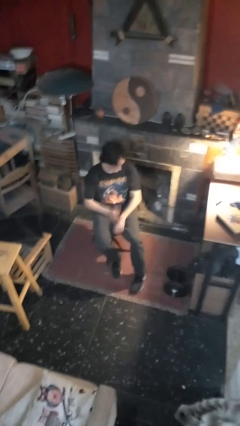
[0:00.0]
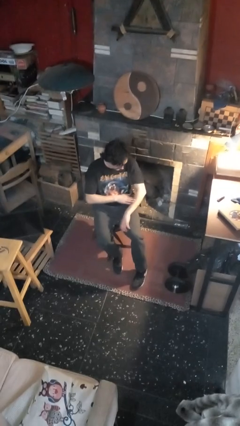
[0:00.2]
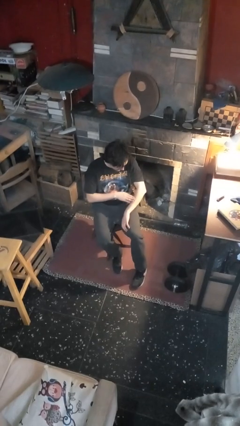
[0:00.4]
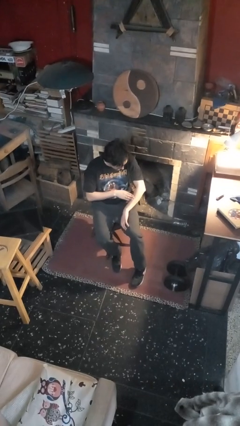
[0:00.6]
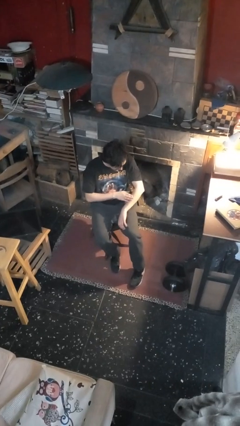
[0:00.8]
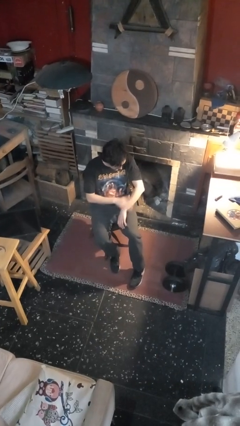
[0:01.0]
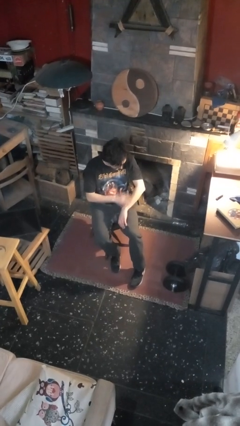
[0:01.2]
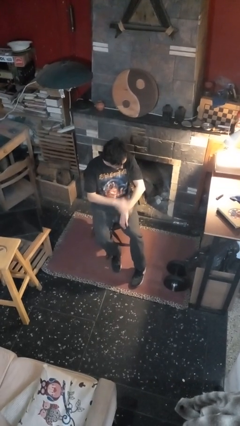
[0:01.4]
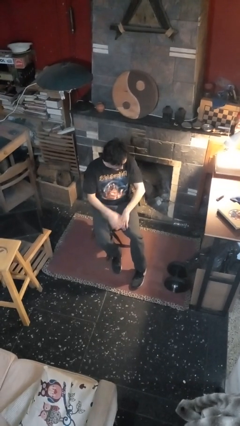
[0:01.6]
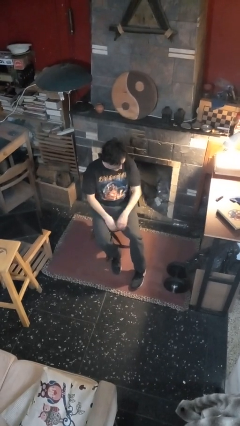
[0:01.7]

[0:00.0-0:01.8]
person swats bug

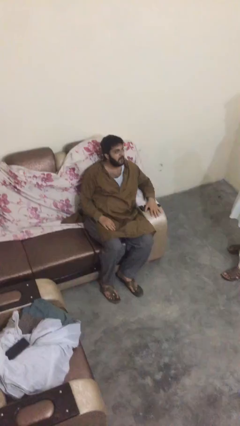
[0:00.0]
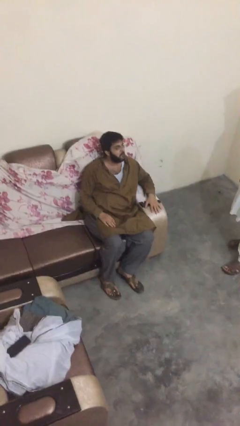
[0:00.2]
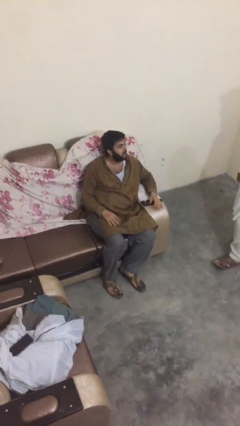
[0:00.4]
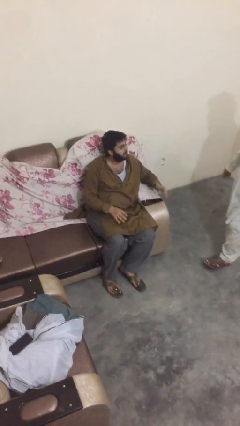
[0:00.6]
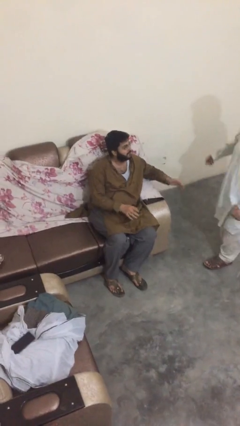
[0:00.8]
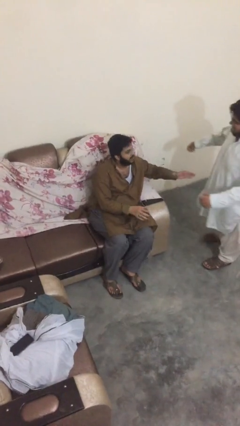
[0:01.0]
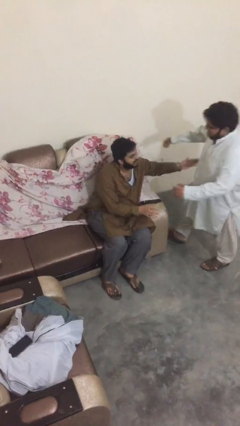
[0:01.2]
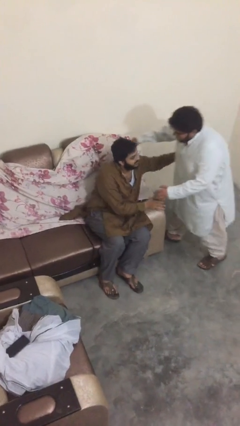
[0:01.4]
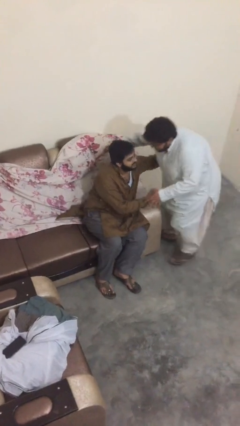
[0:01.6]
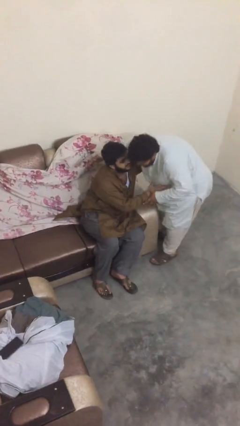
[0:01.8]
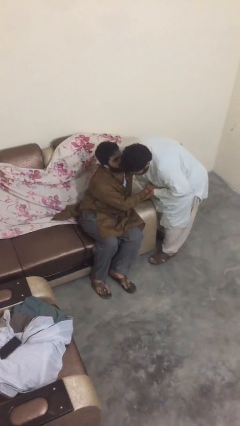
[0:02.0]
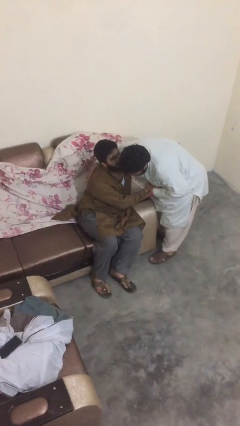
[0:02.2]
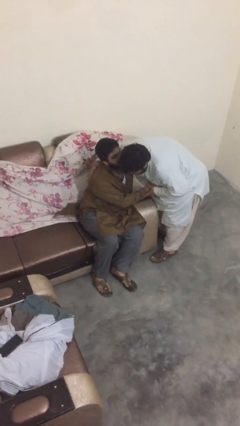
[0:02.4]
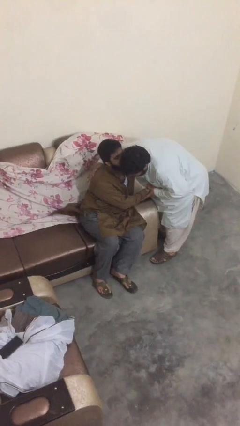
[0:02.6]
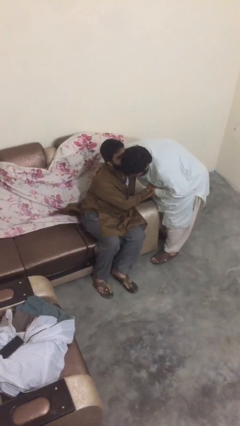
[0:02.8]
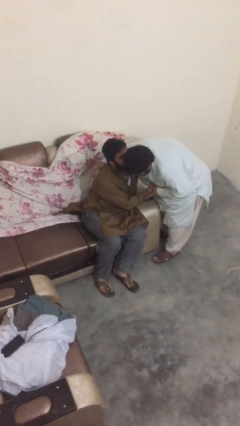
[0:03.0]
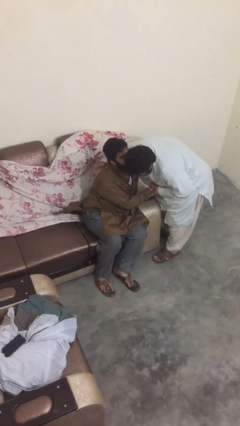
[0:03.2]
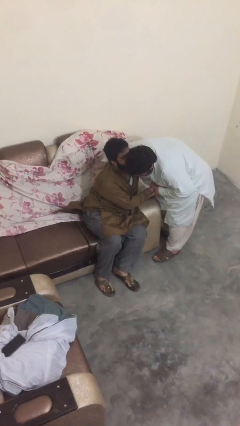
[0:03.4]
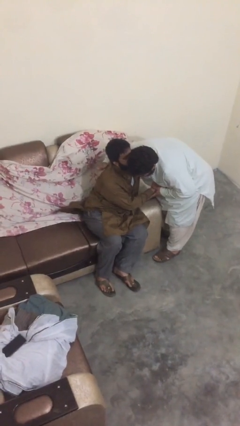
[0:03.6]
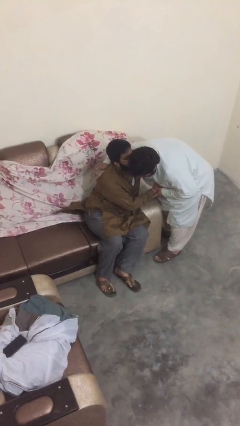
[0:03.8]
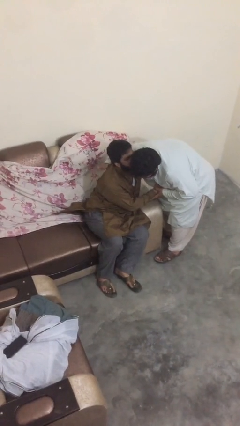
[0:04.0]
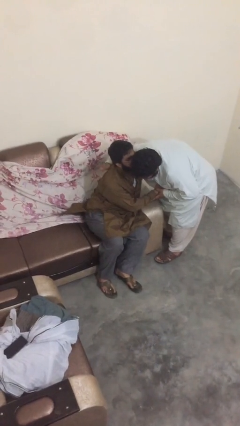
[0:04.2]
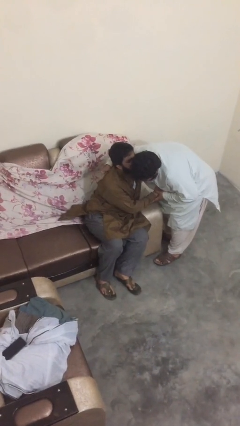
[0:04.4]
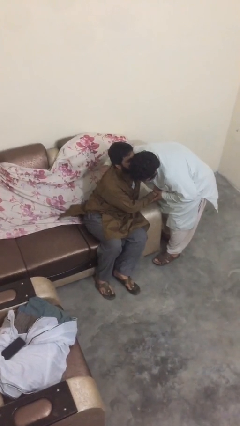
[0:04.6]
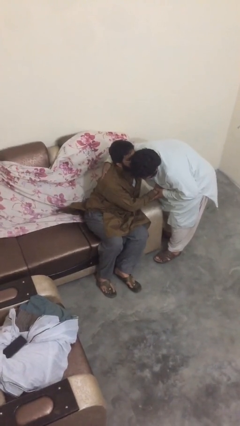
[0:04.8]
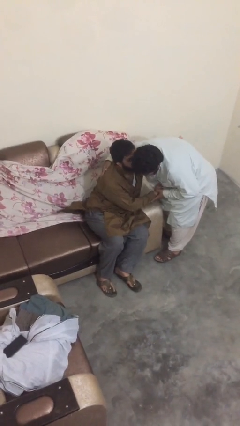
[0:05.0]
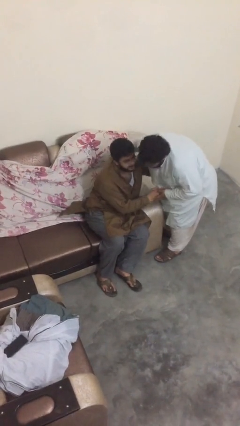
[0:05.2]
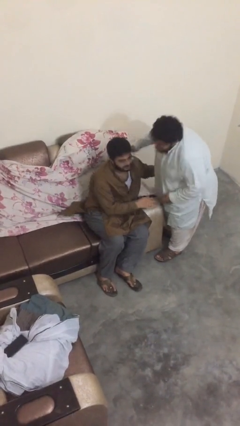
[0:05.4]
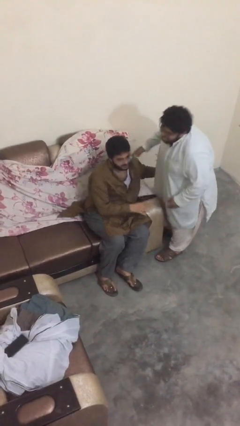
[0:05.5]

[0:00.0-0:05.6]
person embraces person

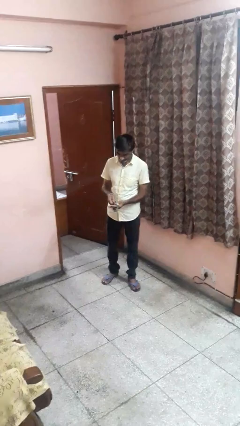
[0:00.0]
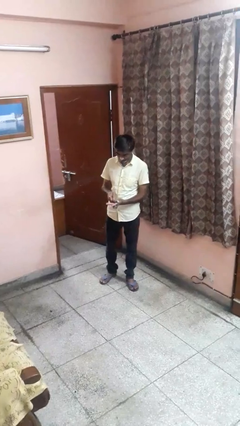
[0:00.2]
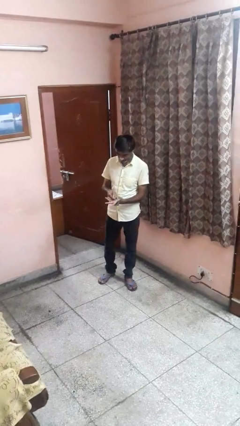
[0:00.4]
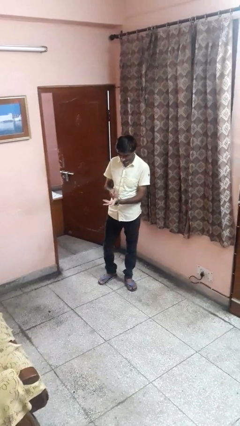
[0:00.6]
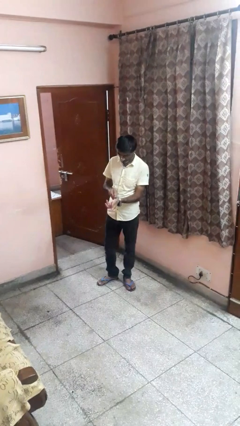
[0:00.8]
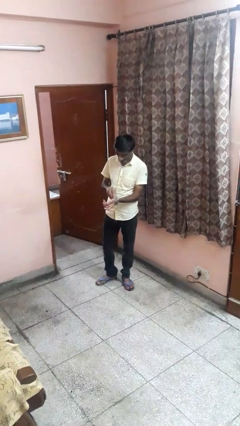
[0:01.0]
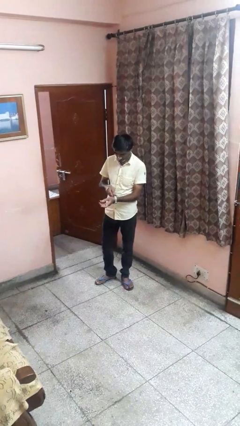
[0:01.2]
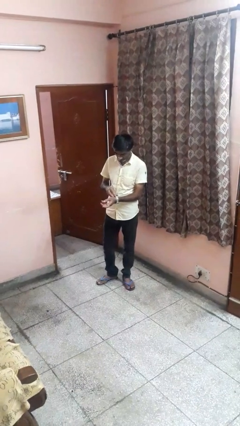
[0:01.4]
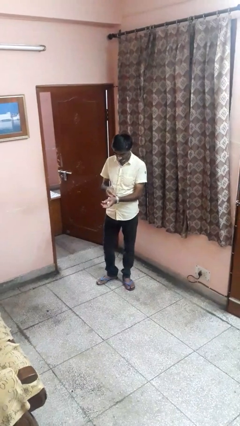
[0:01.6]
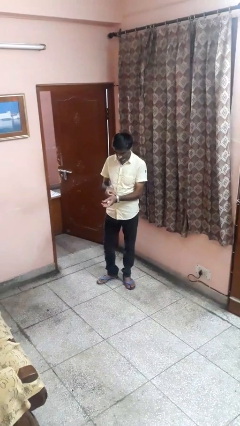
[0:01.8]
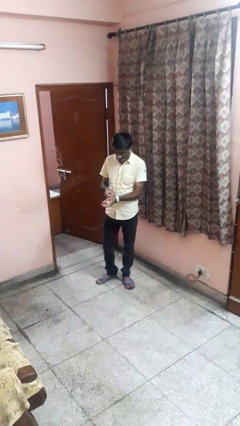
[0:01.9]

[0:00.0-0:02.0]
person puts on wristwatch

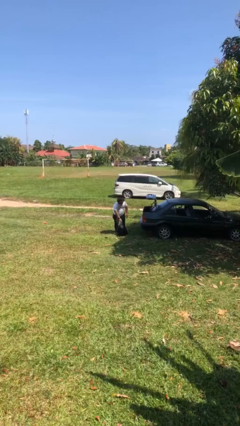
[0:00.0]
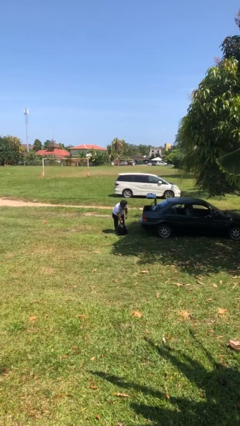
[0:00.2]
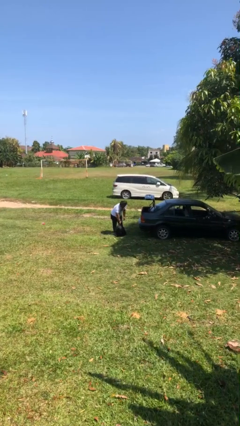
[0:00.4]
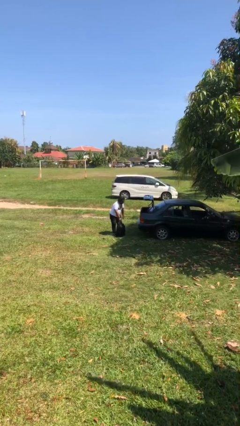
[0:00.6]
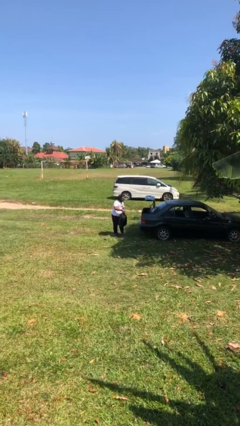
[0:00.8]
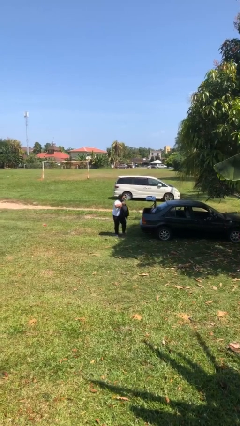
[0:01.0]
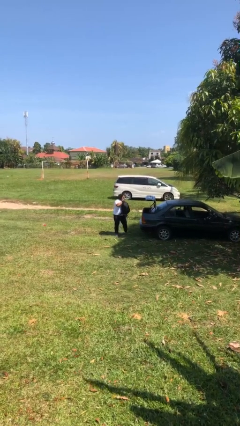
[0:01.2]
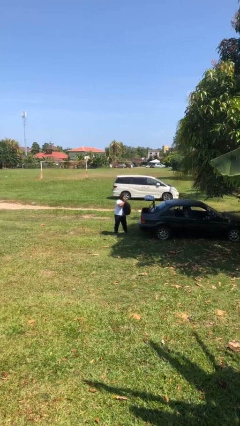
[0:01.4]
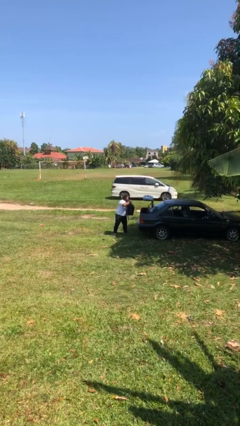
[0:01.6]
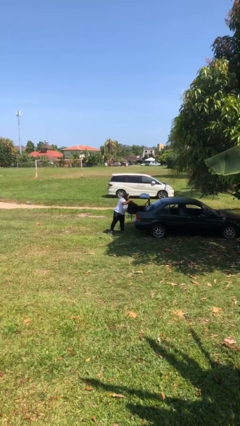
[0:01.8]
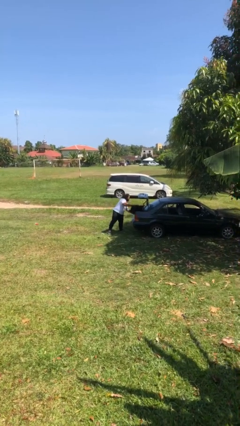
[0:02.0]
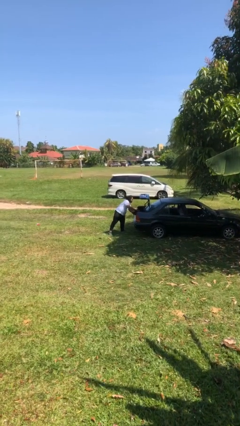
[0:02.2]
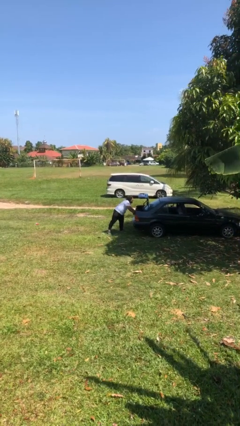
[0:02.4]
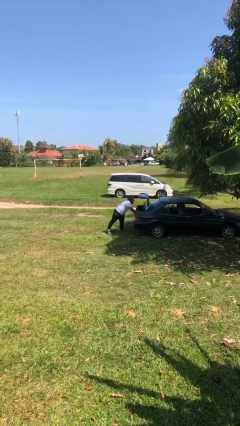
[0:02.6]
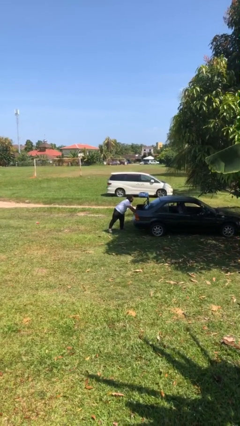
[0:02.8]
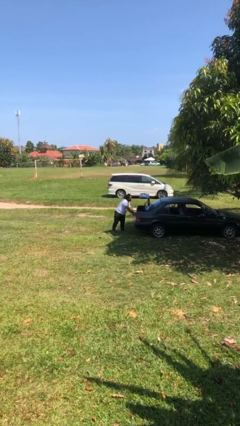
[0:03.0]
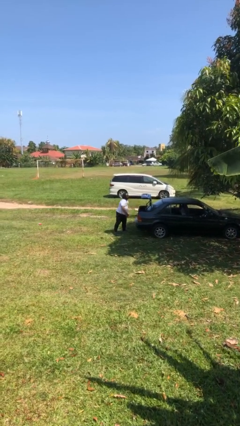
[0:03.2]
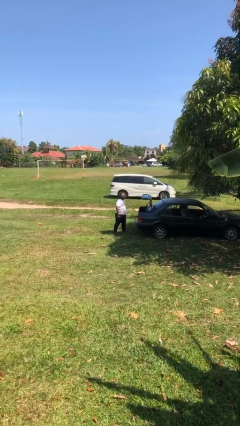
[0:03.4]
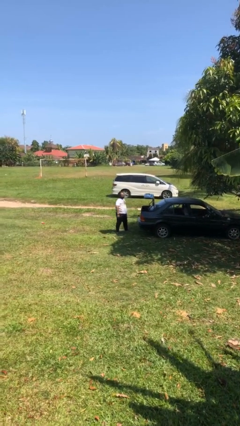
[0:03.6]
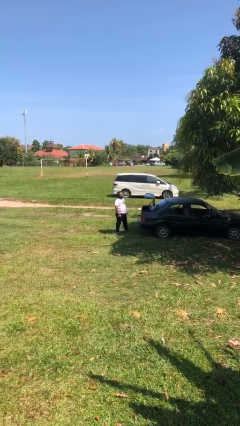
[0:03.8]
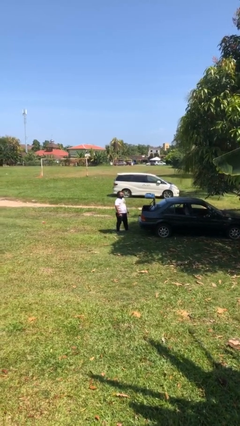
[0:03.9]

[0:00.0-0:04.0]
person loads car

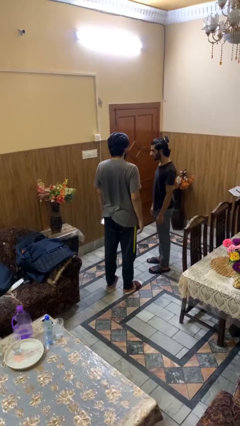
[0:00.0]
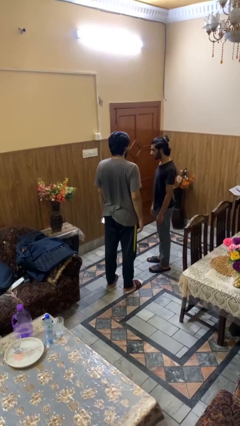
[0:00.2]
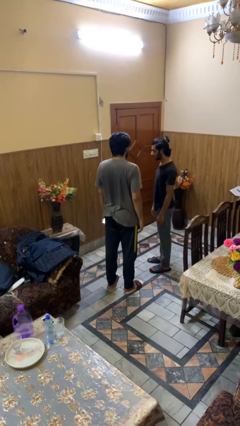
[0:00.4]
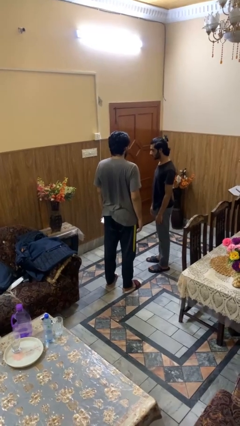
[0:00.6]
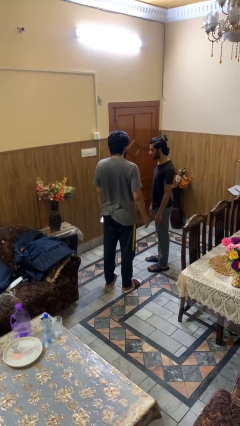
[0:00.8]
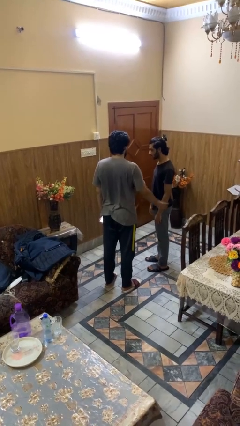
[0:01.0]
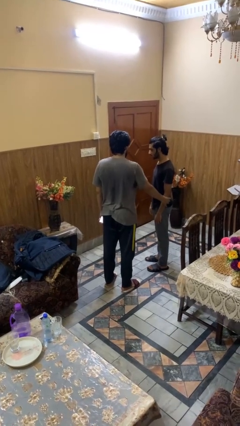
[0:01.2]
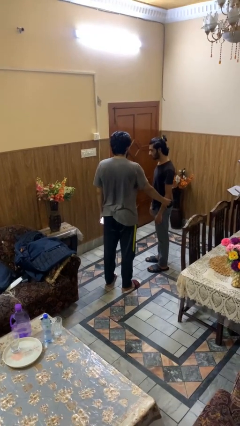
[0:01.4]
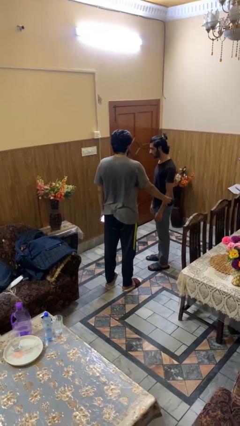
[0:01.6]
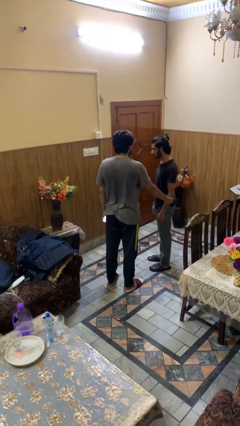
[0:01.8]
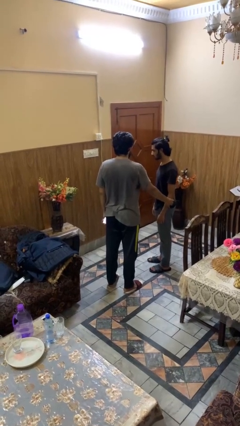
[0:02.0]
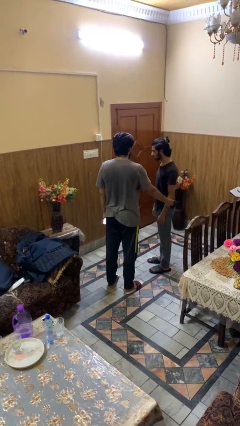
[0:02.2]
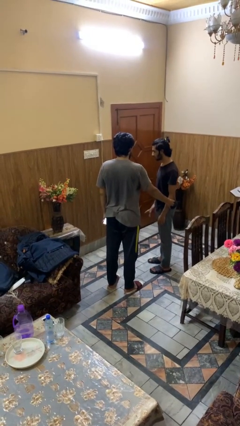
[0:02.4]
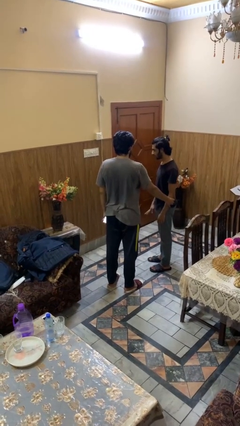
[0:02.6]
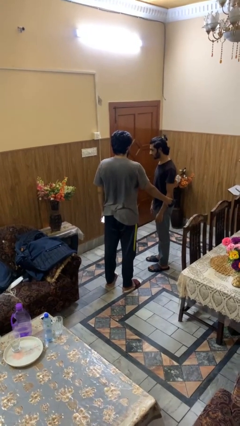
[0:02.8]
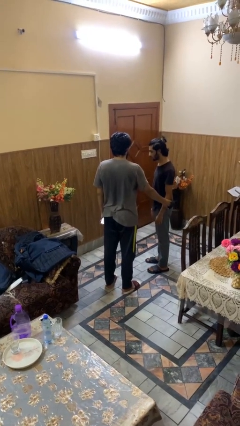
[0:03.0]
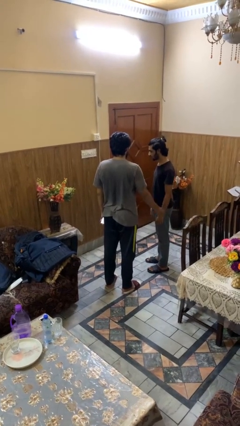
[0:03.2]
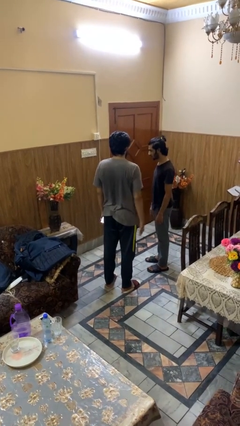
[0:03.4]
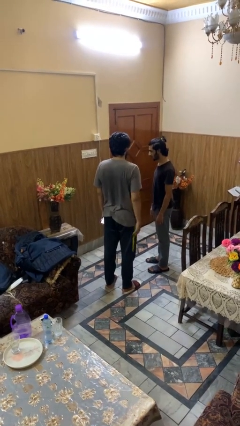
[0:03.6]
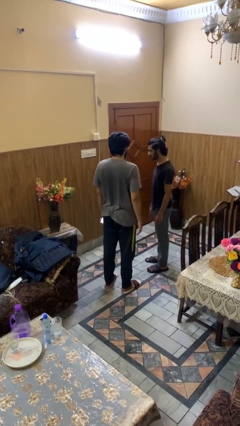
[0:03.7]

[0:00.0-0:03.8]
person grabs person by forearm

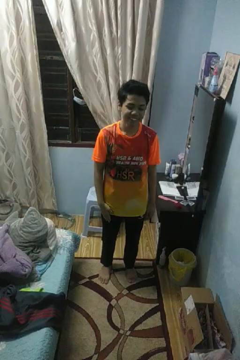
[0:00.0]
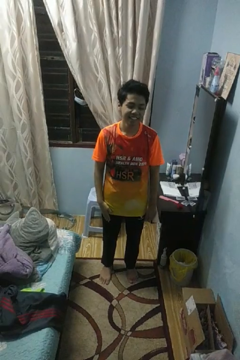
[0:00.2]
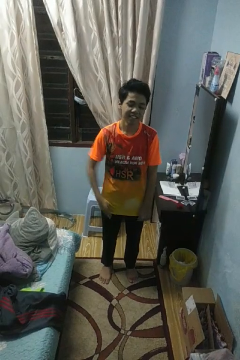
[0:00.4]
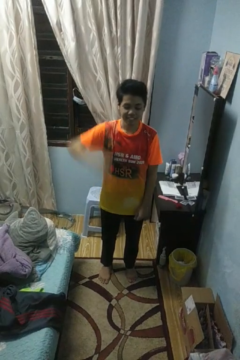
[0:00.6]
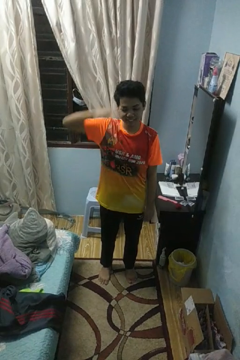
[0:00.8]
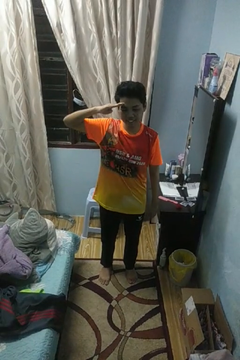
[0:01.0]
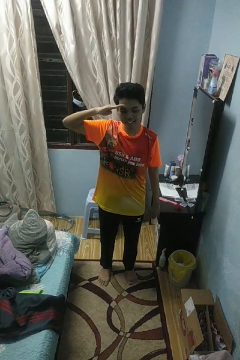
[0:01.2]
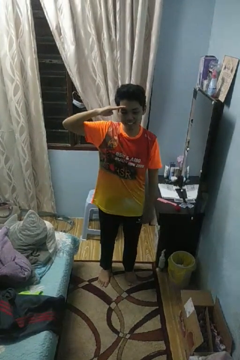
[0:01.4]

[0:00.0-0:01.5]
person salutes
